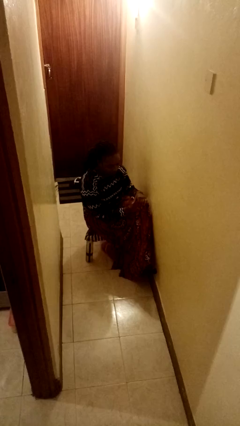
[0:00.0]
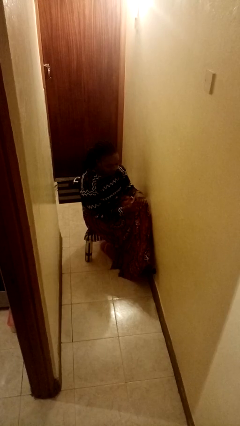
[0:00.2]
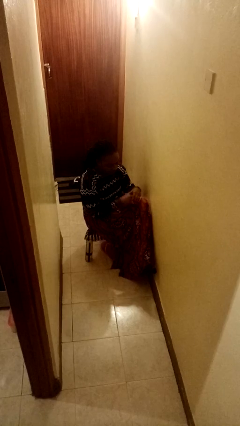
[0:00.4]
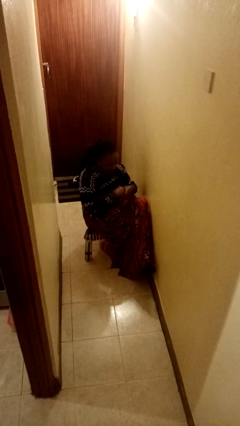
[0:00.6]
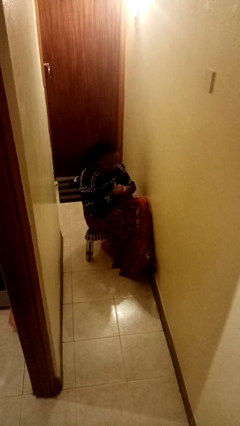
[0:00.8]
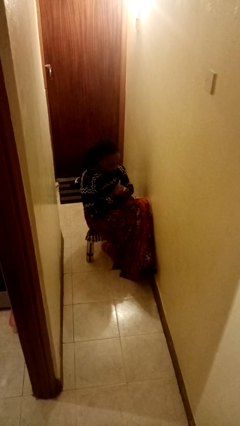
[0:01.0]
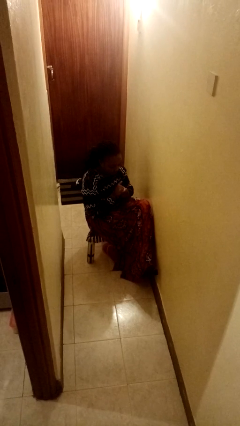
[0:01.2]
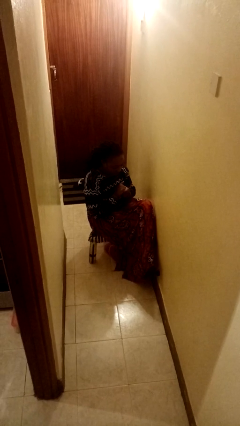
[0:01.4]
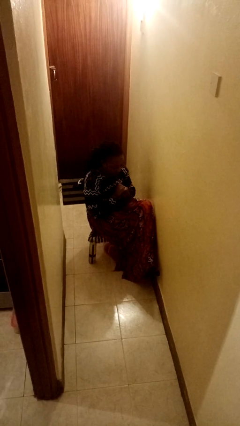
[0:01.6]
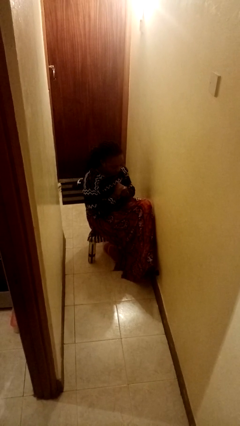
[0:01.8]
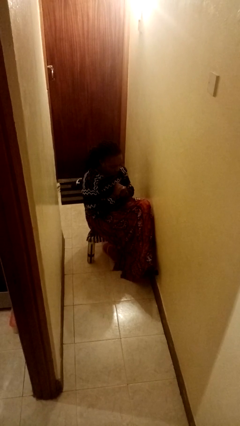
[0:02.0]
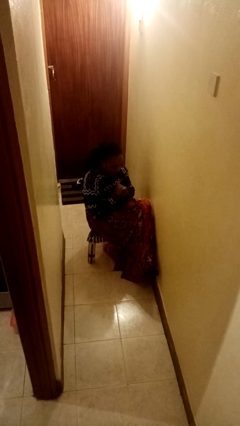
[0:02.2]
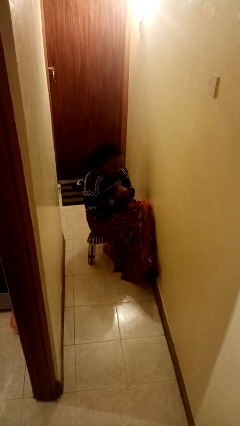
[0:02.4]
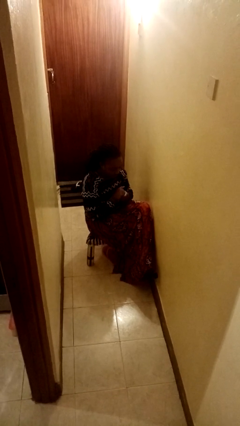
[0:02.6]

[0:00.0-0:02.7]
person cracks knuckles

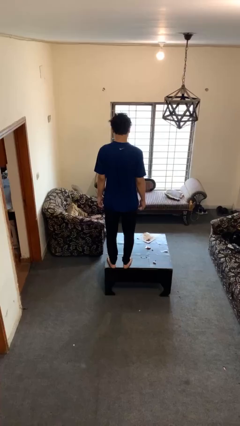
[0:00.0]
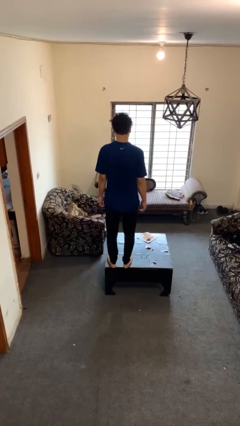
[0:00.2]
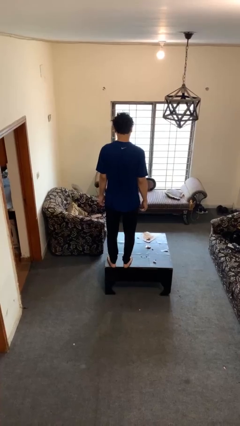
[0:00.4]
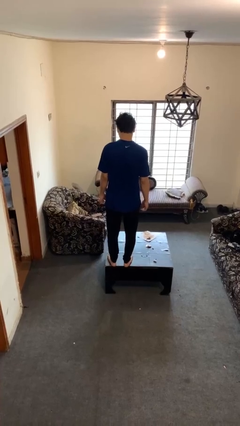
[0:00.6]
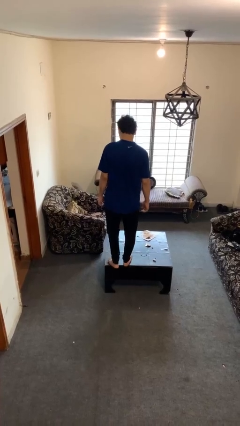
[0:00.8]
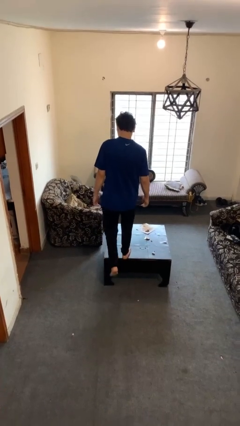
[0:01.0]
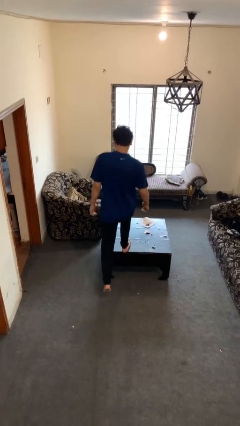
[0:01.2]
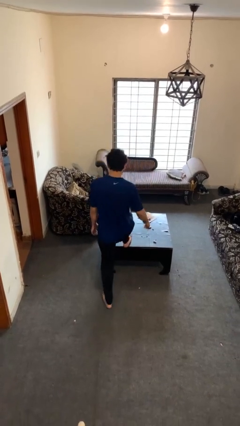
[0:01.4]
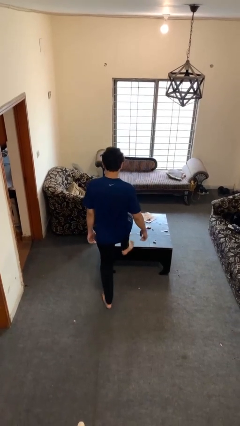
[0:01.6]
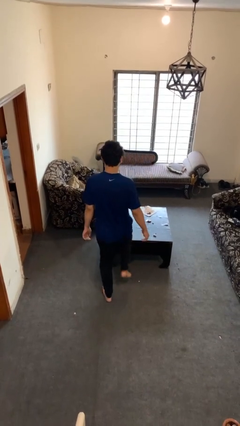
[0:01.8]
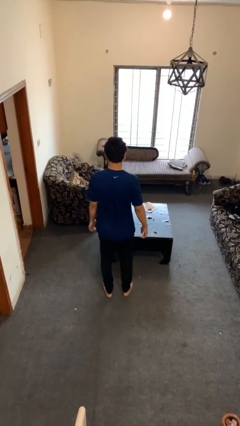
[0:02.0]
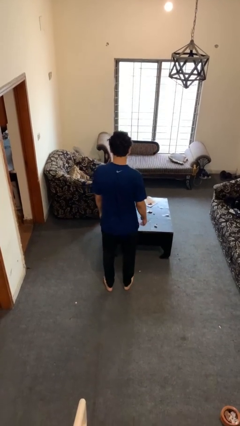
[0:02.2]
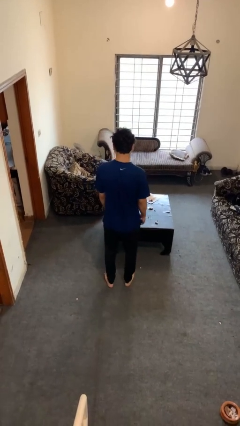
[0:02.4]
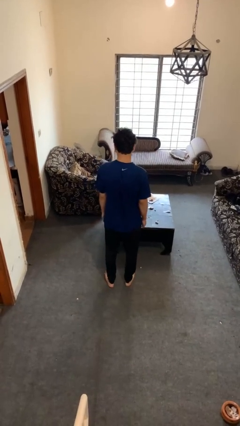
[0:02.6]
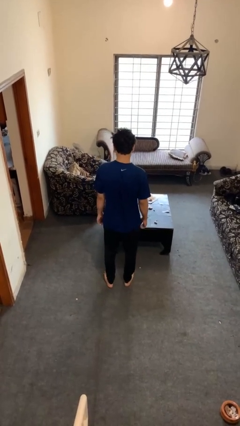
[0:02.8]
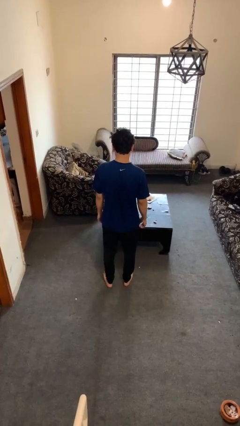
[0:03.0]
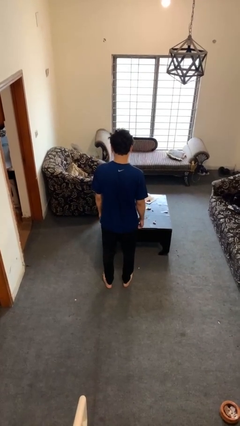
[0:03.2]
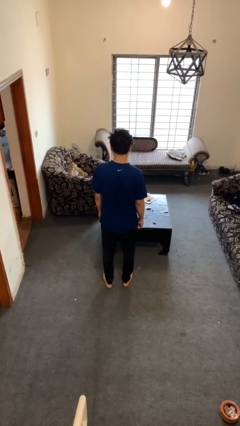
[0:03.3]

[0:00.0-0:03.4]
person climbs off table

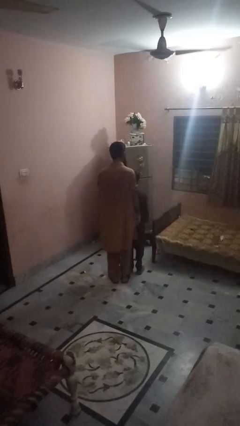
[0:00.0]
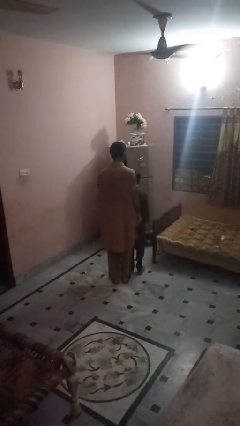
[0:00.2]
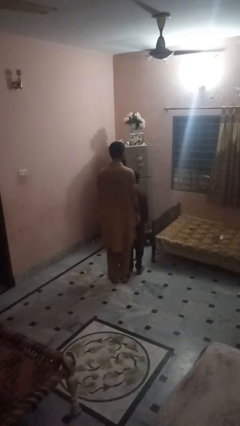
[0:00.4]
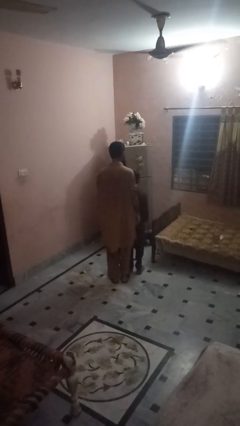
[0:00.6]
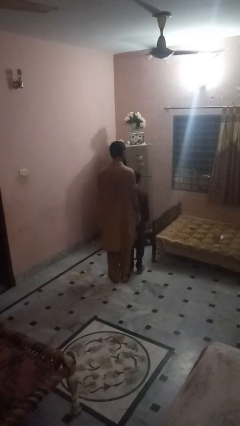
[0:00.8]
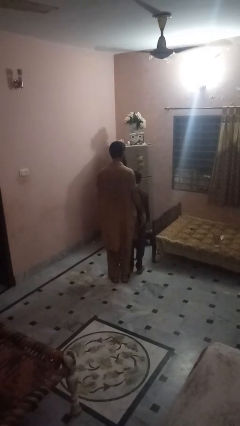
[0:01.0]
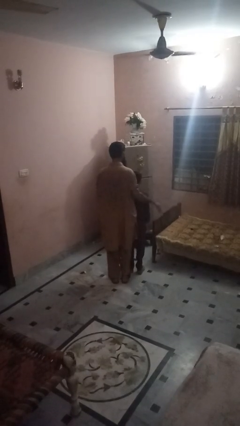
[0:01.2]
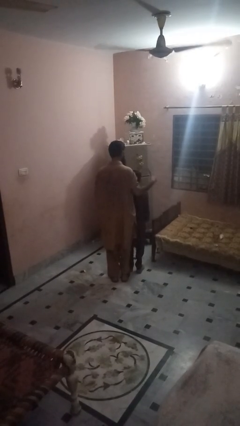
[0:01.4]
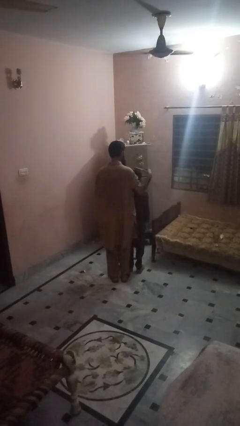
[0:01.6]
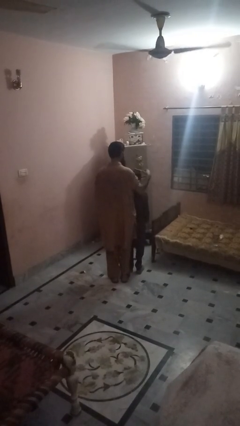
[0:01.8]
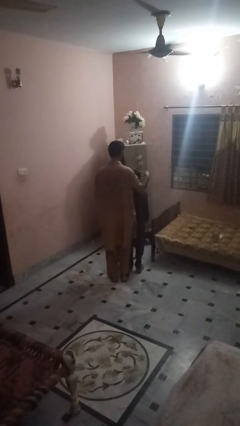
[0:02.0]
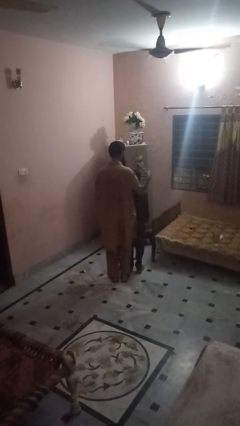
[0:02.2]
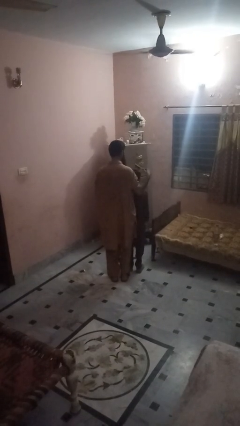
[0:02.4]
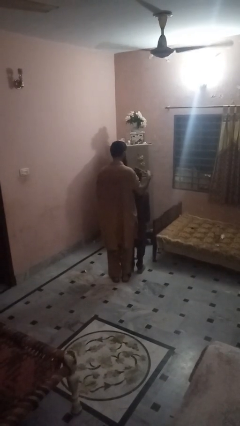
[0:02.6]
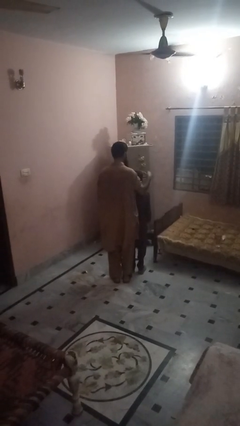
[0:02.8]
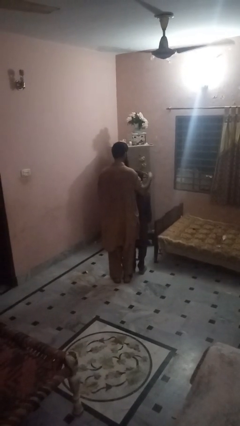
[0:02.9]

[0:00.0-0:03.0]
person brushes hair of person

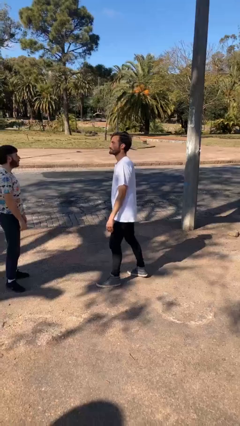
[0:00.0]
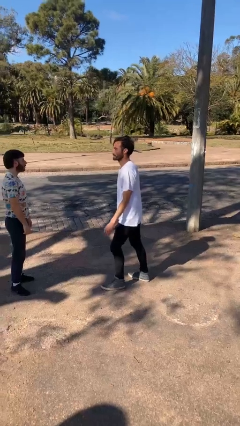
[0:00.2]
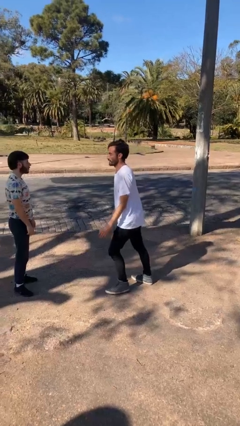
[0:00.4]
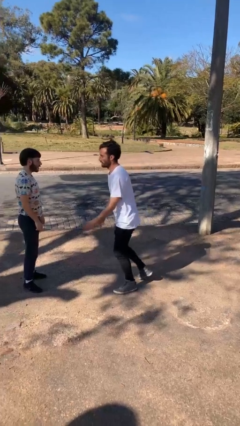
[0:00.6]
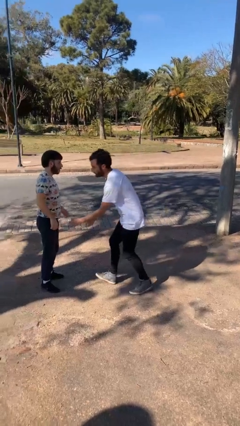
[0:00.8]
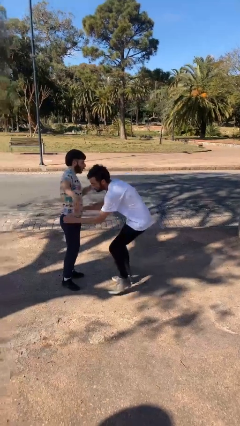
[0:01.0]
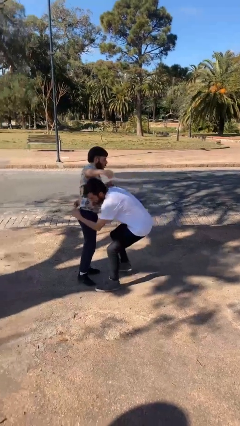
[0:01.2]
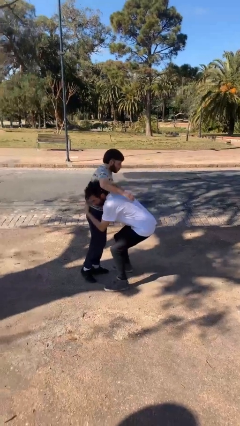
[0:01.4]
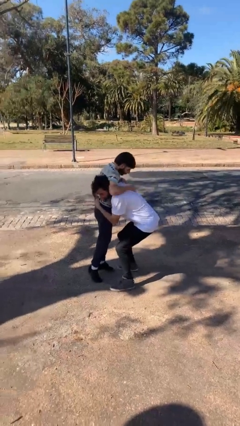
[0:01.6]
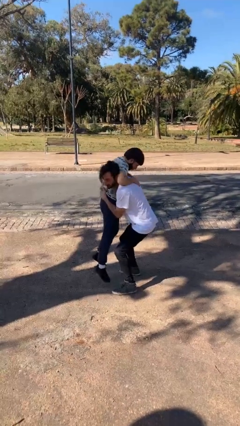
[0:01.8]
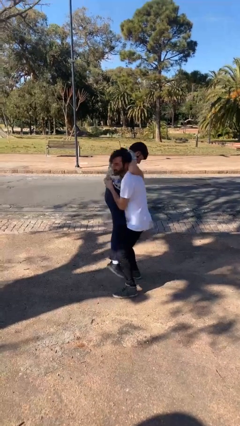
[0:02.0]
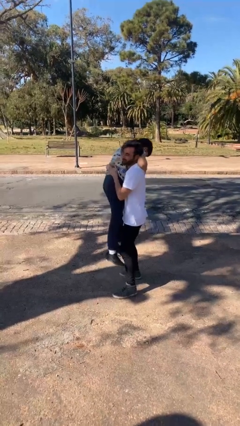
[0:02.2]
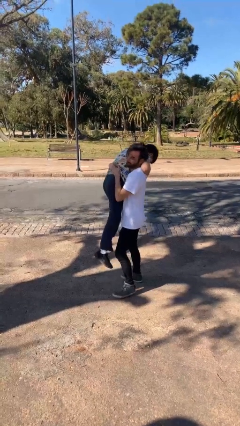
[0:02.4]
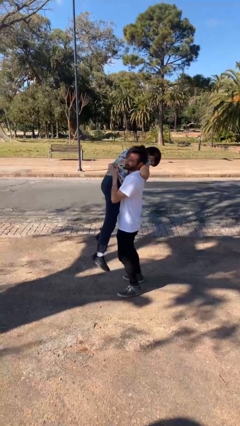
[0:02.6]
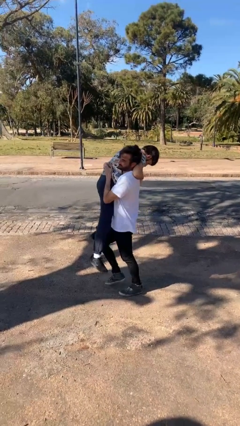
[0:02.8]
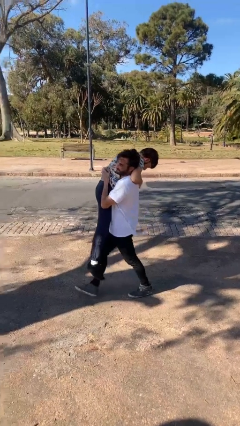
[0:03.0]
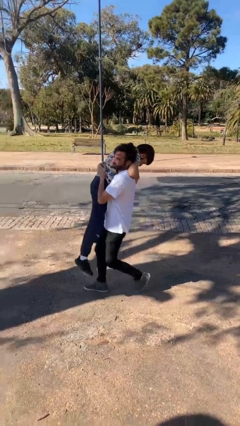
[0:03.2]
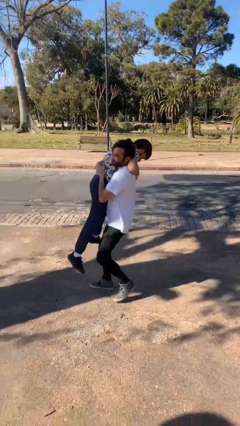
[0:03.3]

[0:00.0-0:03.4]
person carries person over shoulder

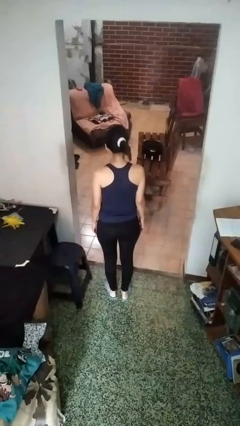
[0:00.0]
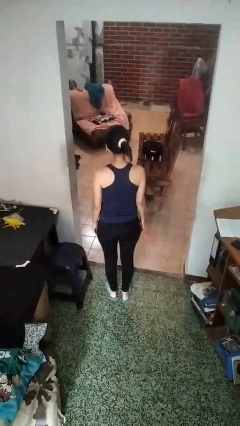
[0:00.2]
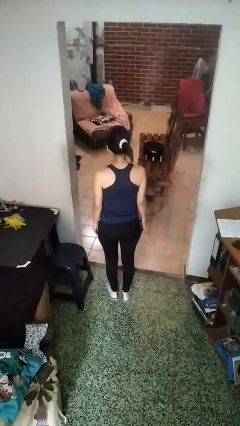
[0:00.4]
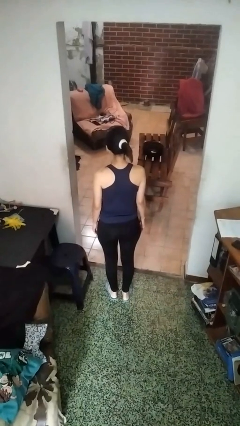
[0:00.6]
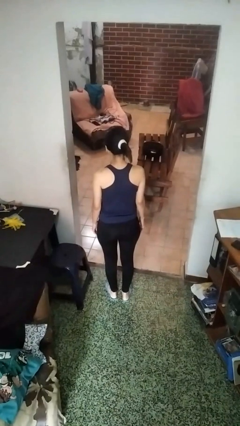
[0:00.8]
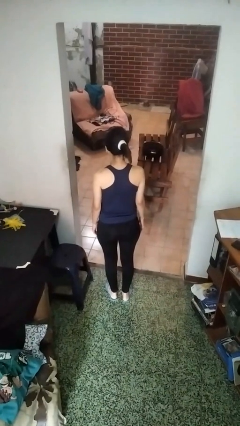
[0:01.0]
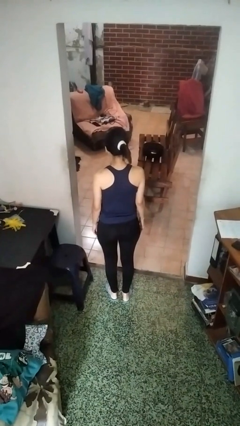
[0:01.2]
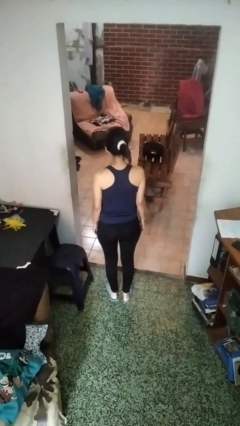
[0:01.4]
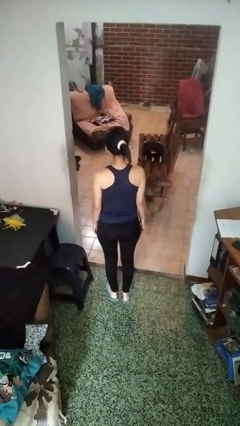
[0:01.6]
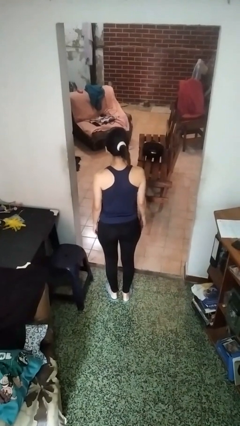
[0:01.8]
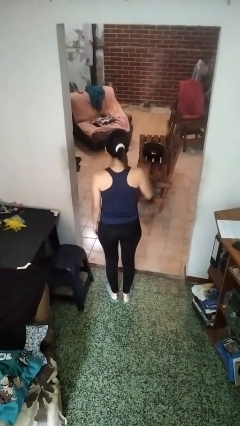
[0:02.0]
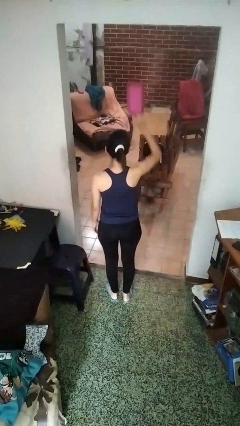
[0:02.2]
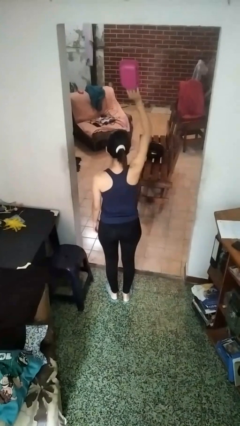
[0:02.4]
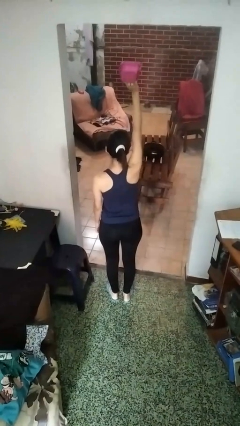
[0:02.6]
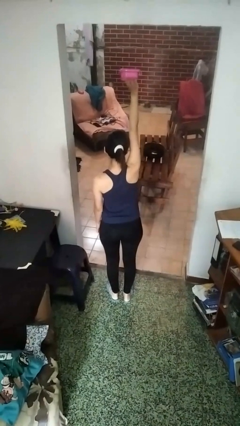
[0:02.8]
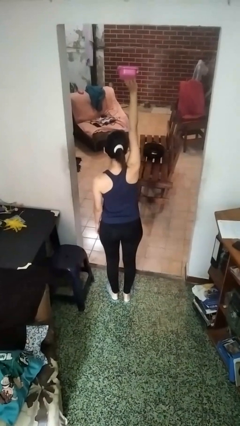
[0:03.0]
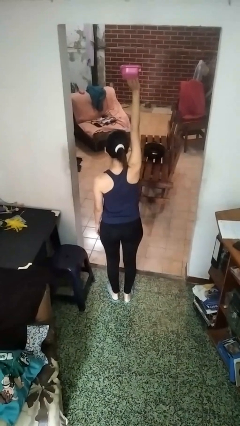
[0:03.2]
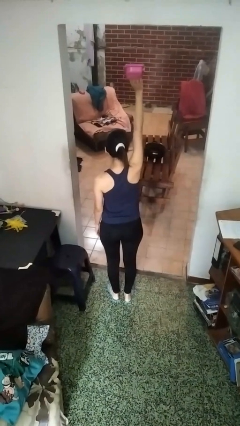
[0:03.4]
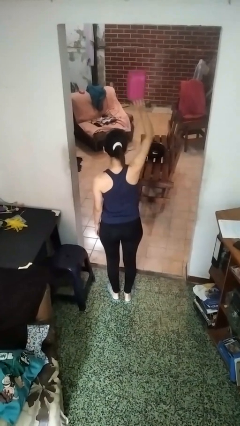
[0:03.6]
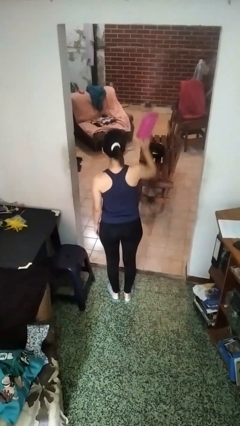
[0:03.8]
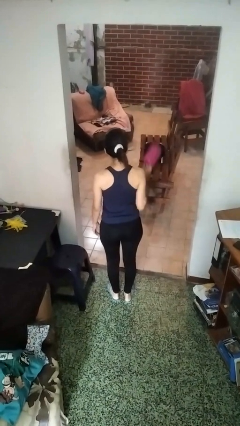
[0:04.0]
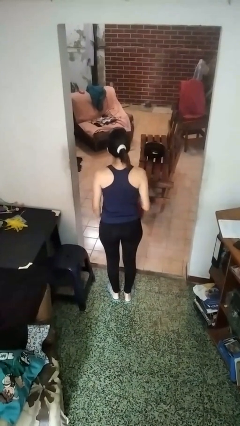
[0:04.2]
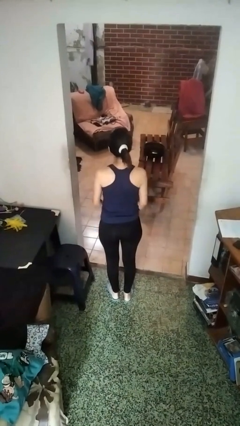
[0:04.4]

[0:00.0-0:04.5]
person holds object above head

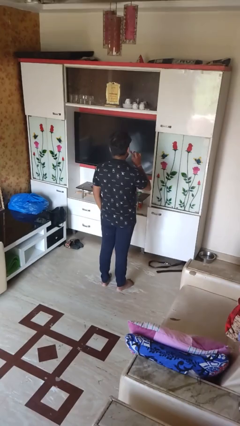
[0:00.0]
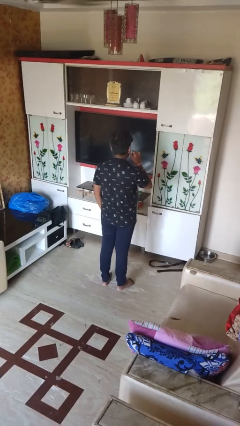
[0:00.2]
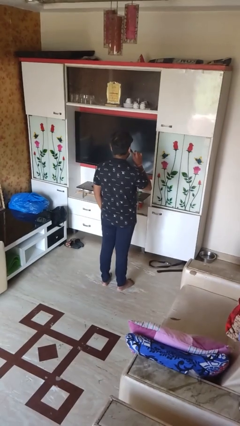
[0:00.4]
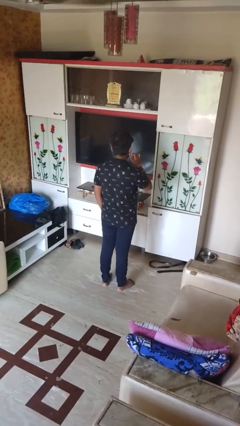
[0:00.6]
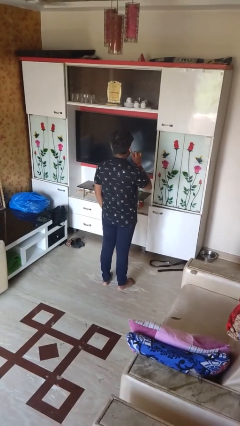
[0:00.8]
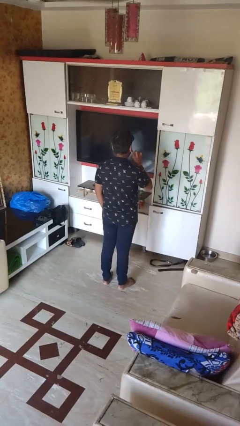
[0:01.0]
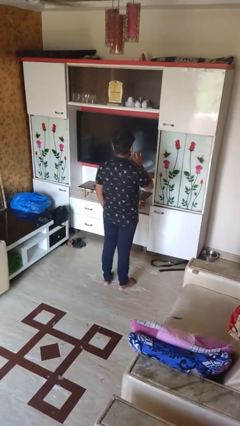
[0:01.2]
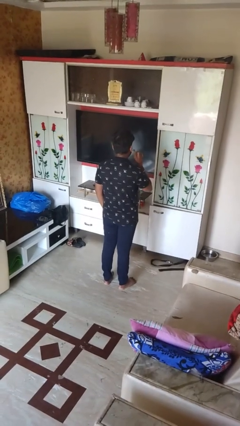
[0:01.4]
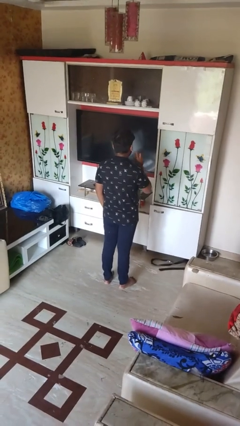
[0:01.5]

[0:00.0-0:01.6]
person touches earlobe
